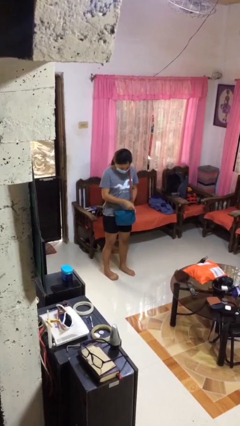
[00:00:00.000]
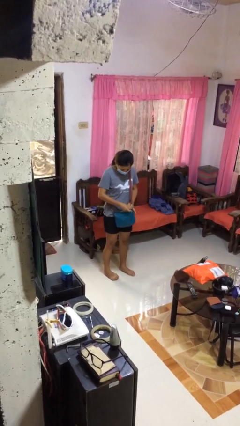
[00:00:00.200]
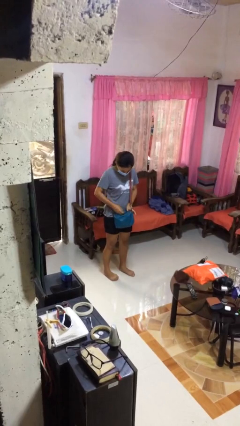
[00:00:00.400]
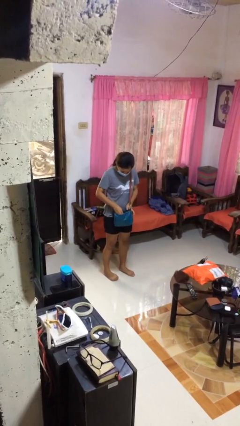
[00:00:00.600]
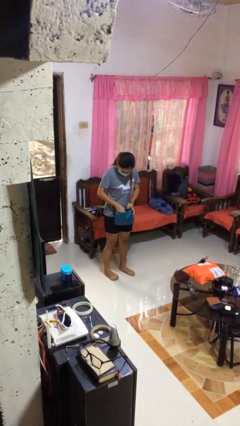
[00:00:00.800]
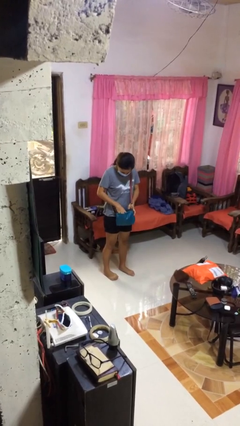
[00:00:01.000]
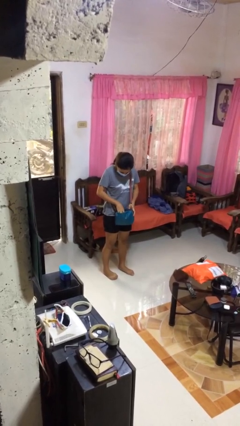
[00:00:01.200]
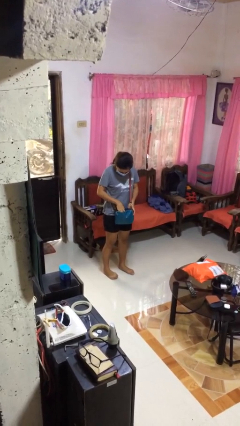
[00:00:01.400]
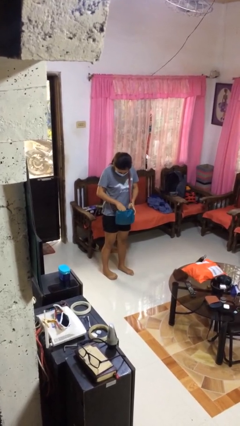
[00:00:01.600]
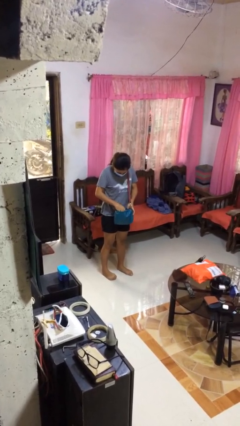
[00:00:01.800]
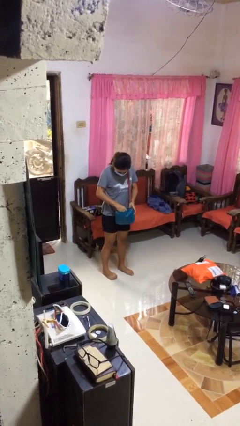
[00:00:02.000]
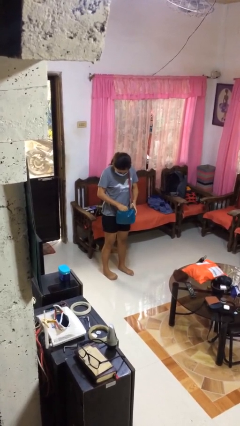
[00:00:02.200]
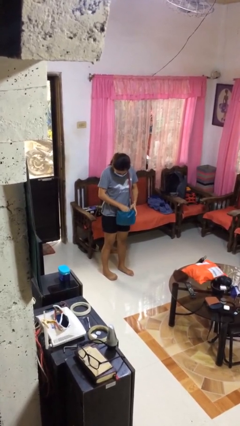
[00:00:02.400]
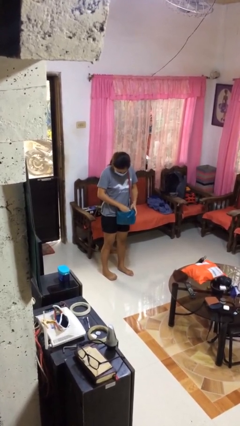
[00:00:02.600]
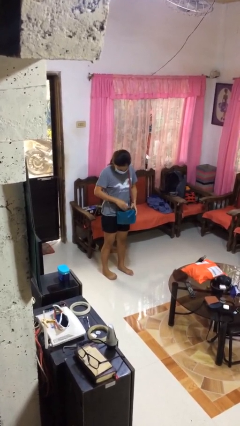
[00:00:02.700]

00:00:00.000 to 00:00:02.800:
person searches in purse

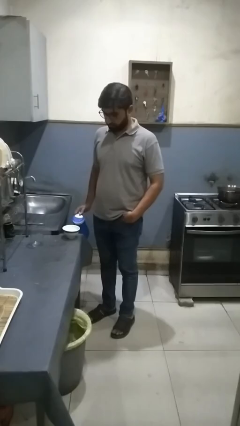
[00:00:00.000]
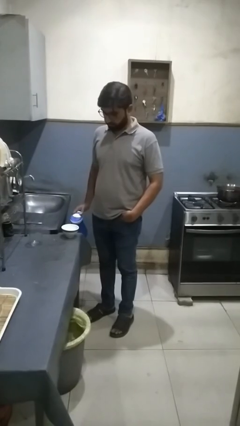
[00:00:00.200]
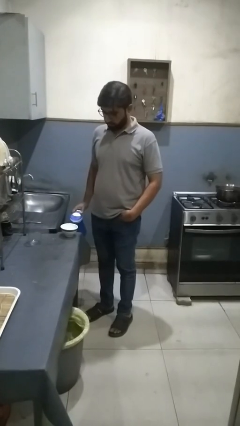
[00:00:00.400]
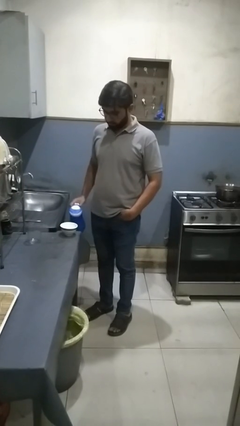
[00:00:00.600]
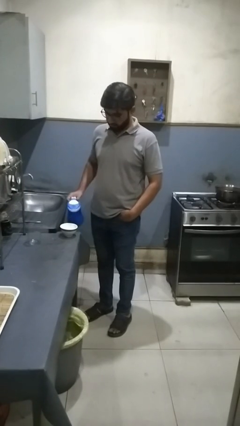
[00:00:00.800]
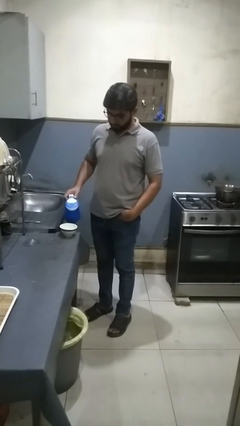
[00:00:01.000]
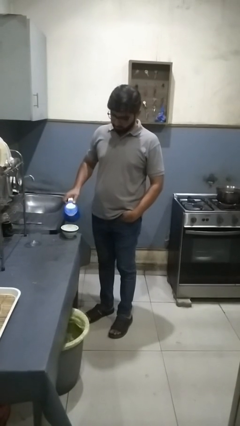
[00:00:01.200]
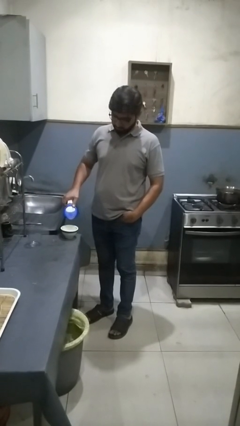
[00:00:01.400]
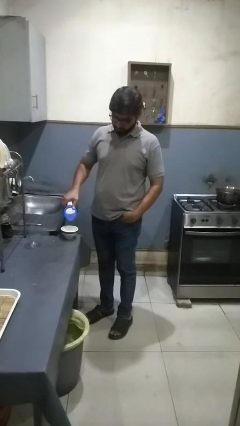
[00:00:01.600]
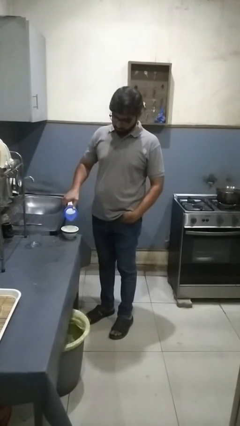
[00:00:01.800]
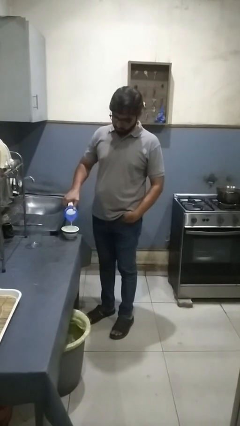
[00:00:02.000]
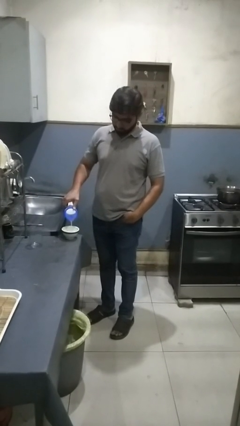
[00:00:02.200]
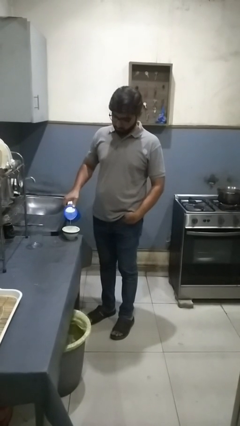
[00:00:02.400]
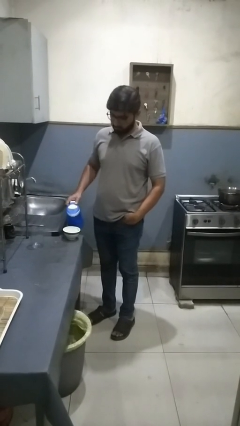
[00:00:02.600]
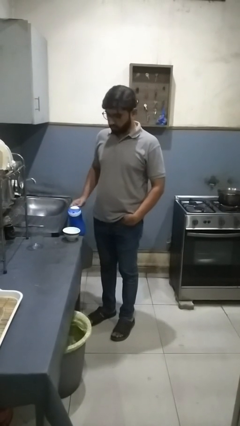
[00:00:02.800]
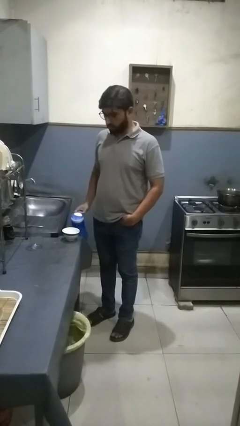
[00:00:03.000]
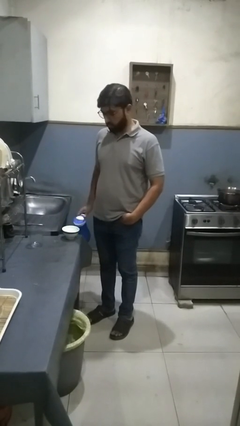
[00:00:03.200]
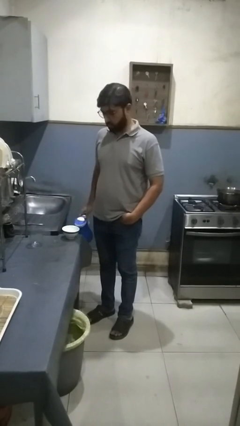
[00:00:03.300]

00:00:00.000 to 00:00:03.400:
person pours into bowl

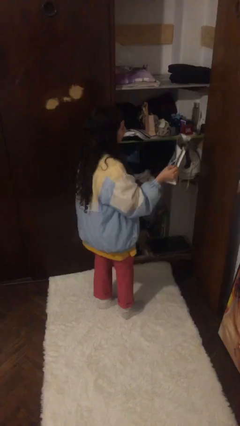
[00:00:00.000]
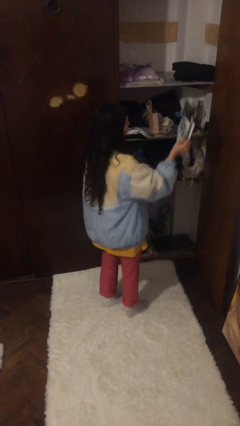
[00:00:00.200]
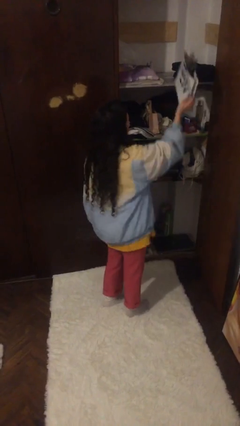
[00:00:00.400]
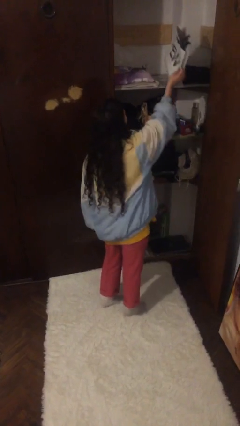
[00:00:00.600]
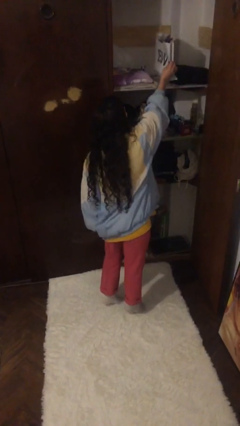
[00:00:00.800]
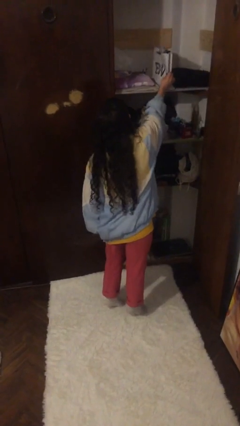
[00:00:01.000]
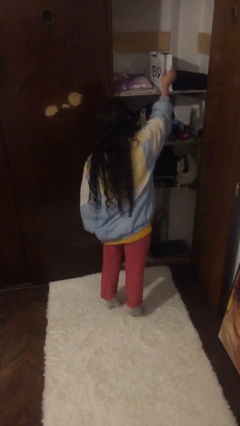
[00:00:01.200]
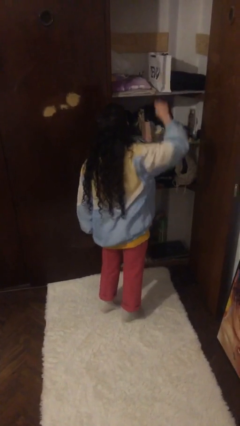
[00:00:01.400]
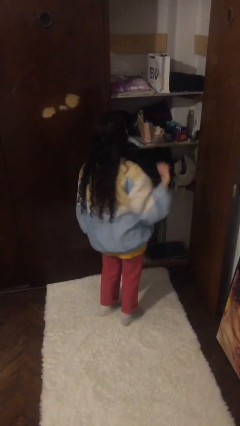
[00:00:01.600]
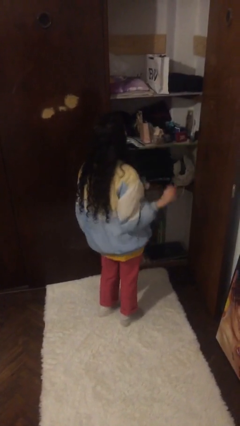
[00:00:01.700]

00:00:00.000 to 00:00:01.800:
person puts down object on shelf

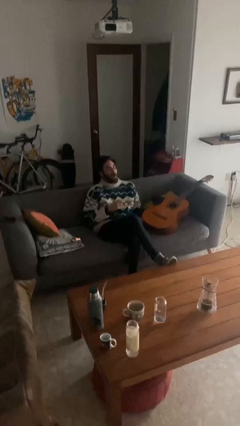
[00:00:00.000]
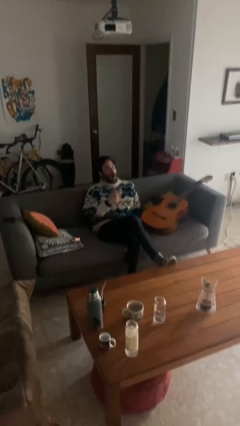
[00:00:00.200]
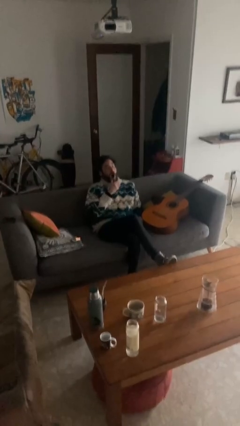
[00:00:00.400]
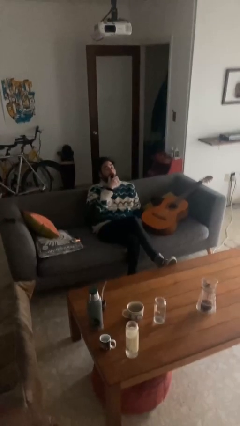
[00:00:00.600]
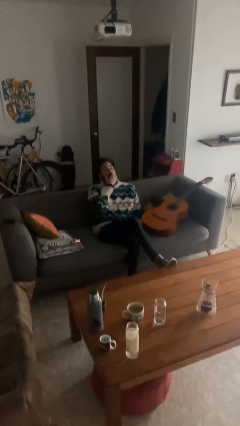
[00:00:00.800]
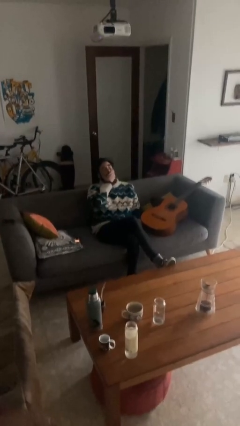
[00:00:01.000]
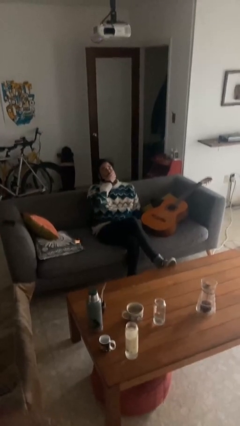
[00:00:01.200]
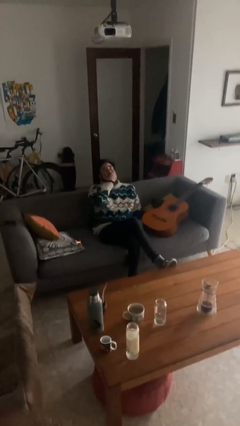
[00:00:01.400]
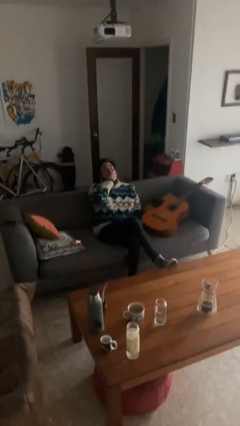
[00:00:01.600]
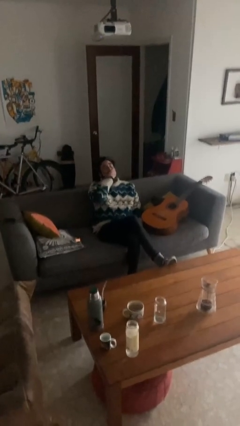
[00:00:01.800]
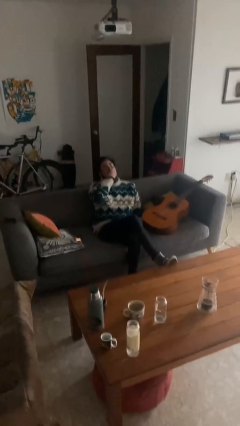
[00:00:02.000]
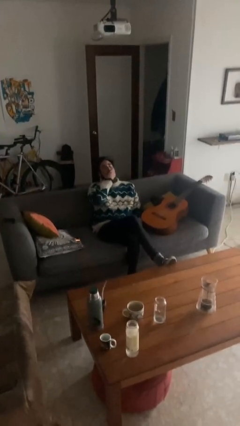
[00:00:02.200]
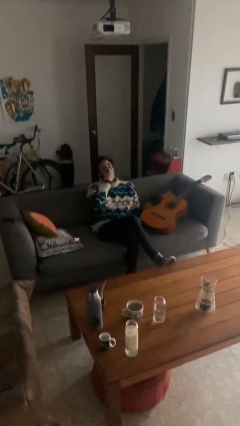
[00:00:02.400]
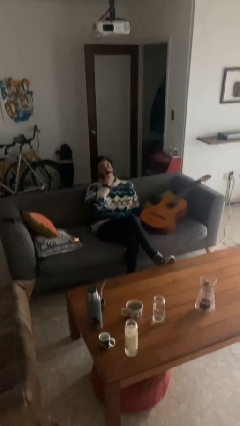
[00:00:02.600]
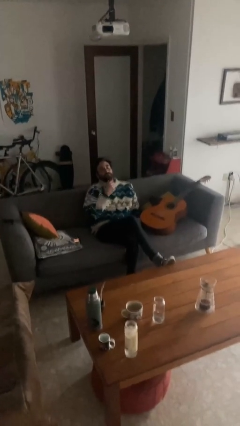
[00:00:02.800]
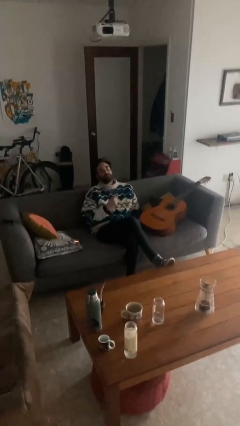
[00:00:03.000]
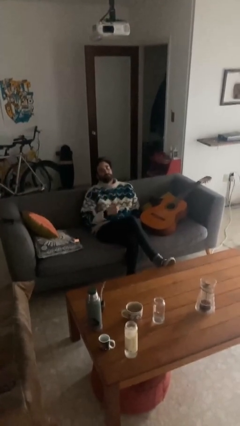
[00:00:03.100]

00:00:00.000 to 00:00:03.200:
person yawns

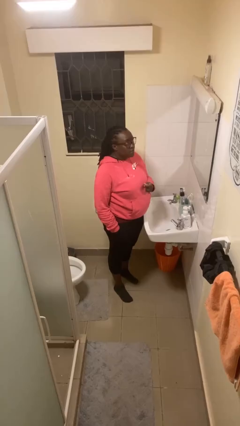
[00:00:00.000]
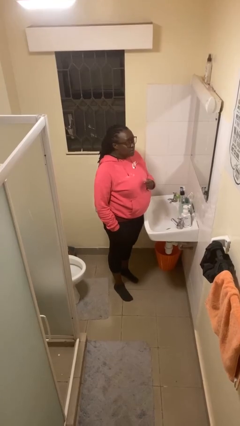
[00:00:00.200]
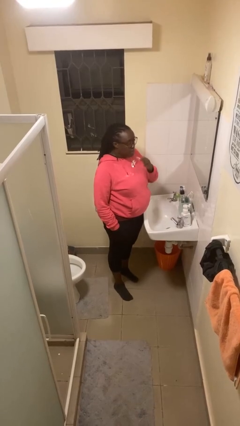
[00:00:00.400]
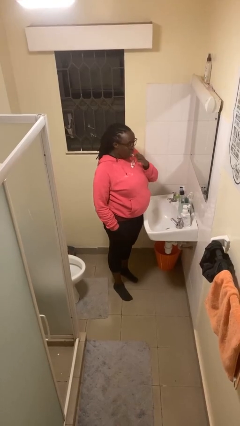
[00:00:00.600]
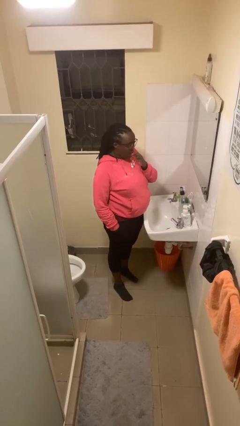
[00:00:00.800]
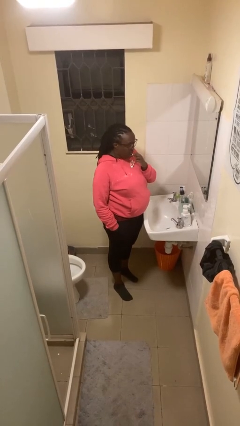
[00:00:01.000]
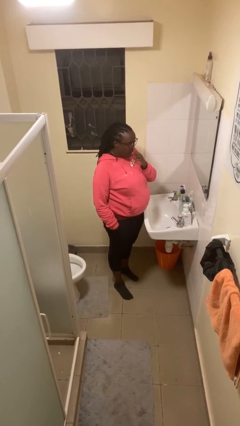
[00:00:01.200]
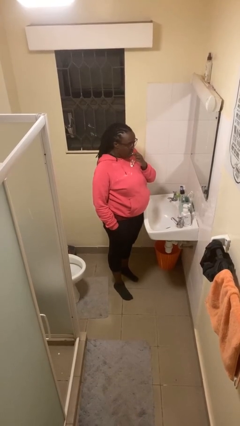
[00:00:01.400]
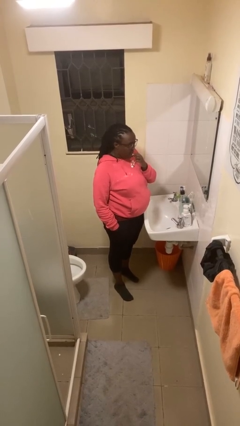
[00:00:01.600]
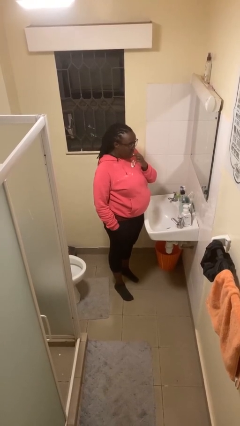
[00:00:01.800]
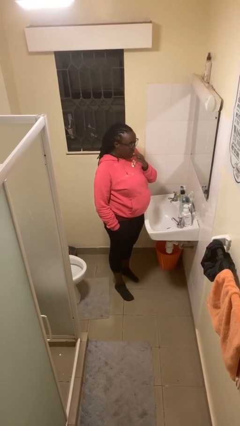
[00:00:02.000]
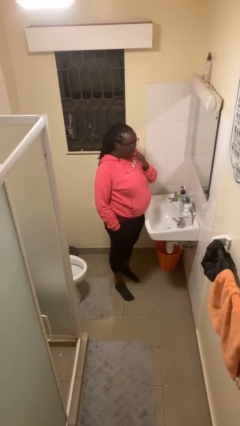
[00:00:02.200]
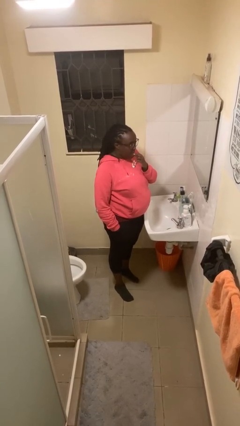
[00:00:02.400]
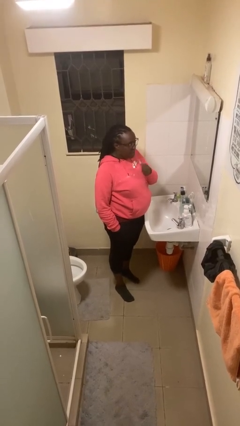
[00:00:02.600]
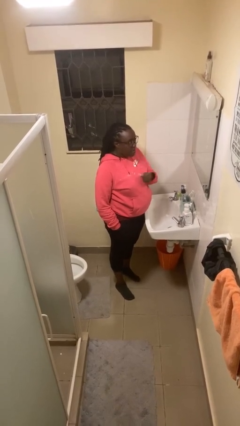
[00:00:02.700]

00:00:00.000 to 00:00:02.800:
person flosses

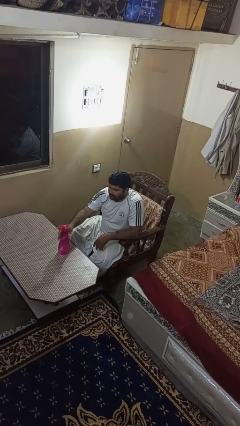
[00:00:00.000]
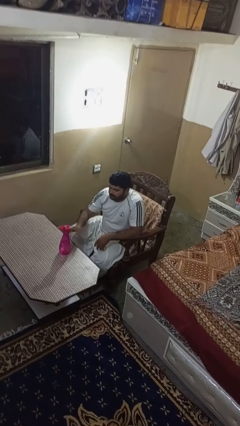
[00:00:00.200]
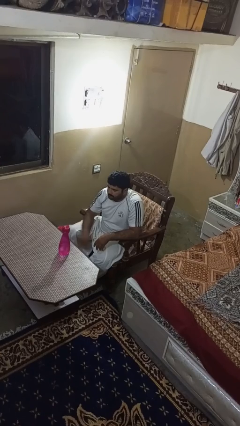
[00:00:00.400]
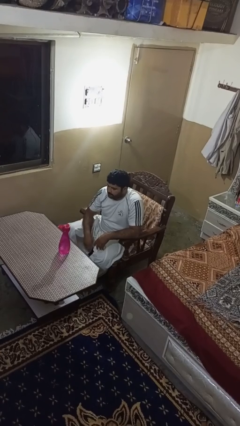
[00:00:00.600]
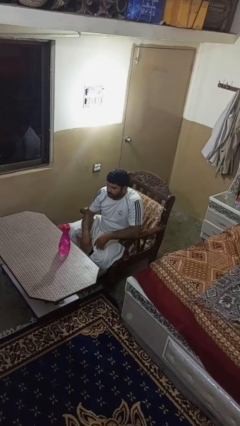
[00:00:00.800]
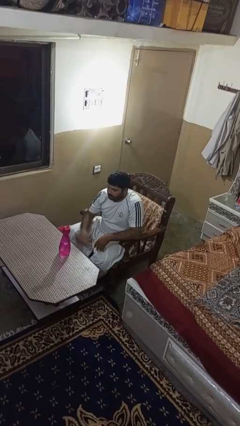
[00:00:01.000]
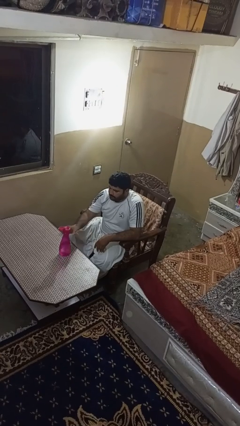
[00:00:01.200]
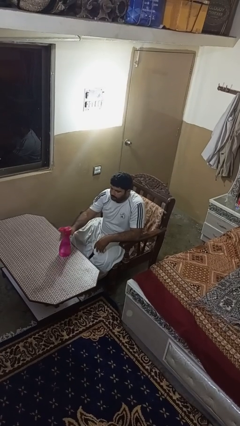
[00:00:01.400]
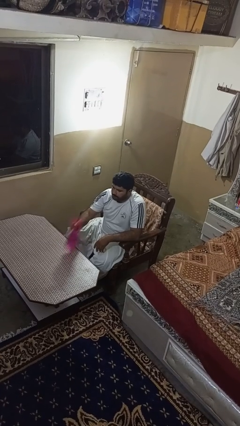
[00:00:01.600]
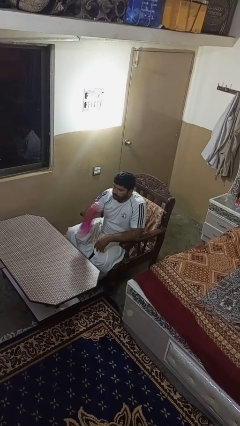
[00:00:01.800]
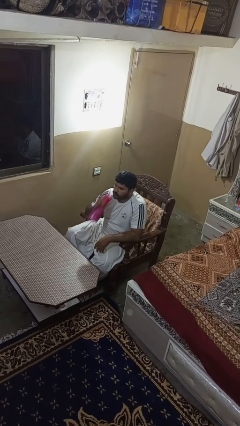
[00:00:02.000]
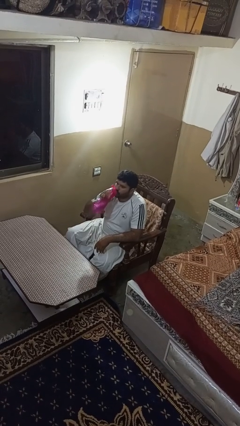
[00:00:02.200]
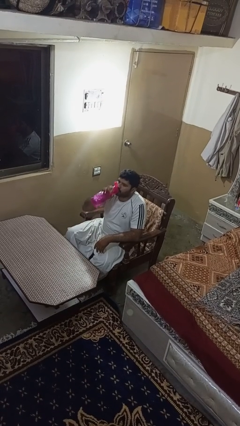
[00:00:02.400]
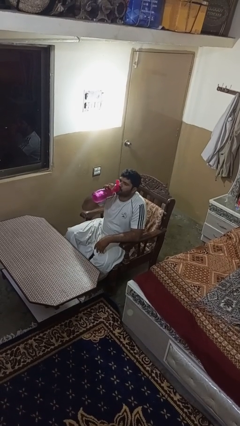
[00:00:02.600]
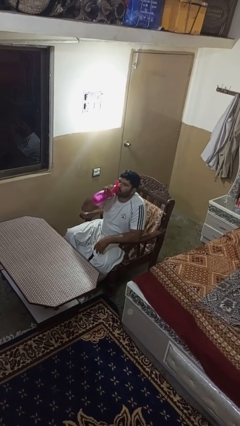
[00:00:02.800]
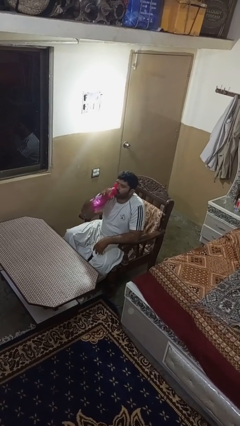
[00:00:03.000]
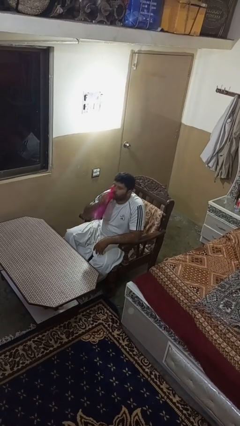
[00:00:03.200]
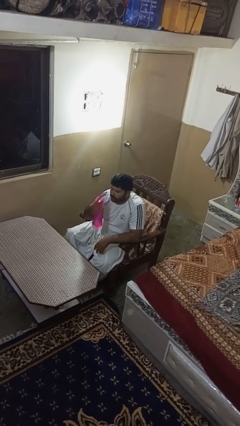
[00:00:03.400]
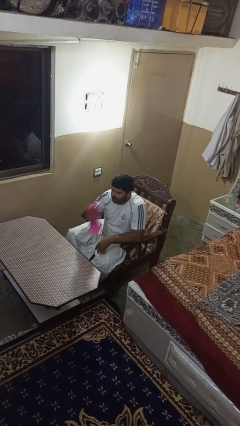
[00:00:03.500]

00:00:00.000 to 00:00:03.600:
person drinks from bottle
